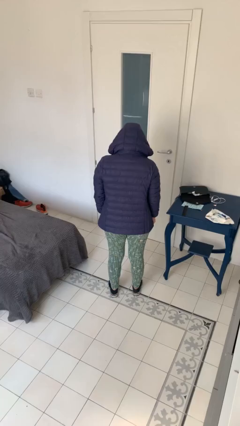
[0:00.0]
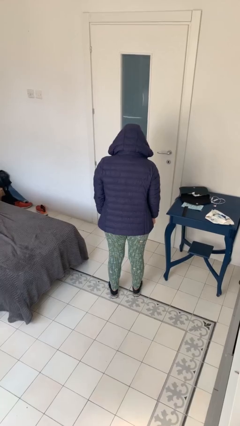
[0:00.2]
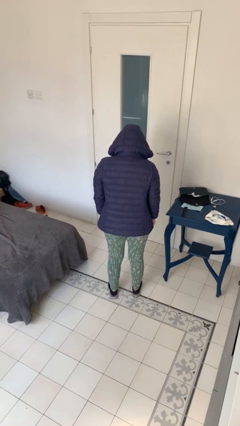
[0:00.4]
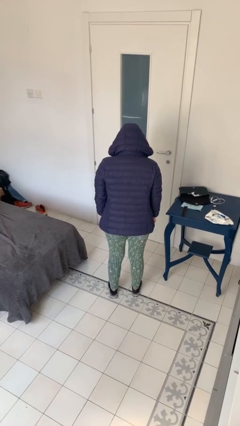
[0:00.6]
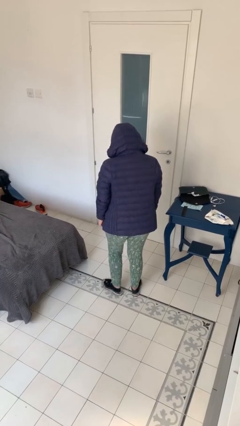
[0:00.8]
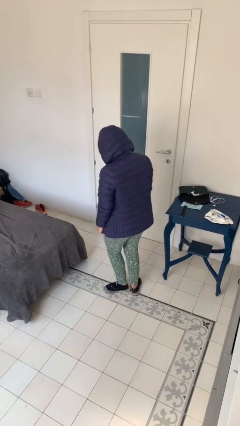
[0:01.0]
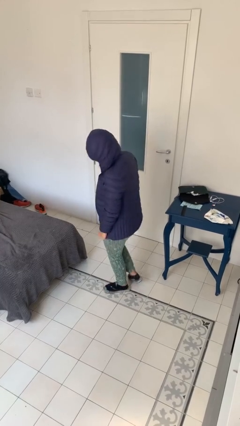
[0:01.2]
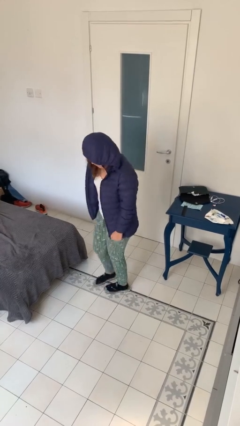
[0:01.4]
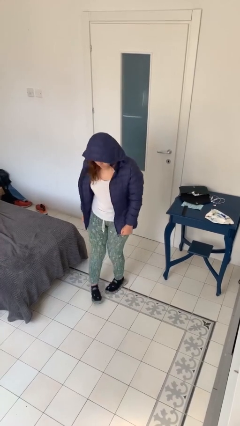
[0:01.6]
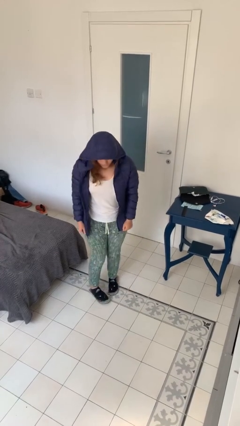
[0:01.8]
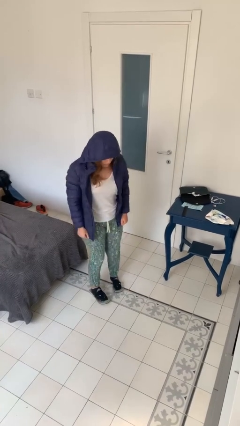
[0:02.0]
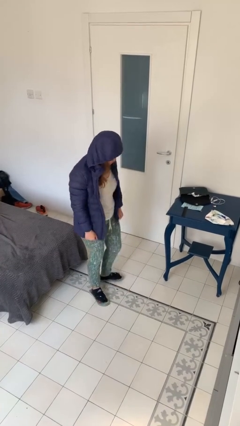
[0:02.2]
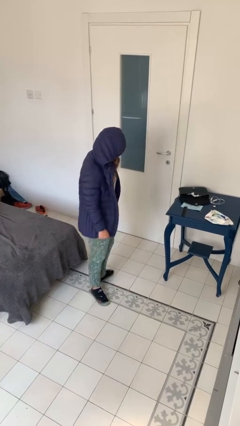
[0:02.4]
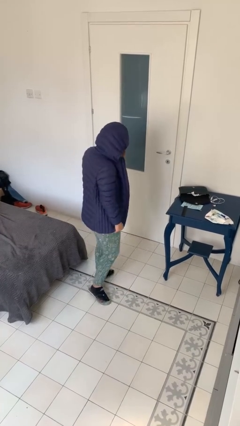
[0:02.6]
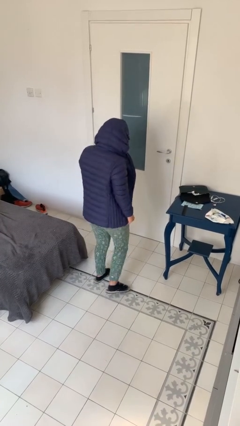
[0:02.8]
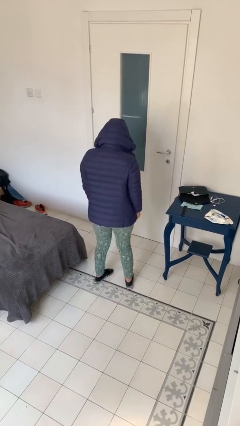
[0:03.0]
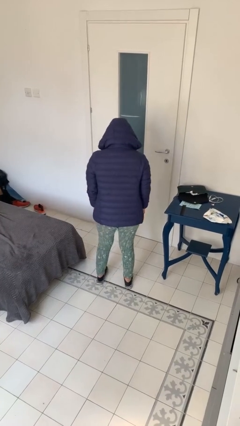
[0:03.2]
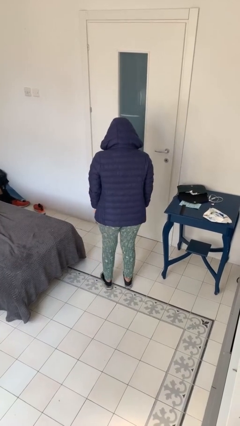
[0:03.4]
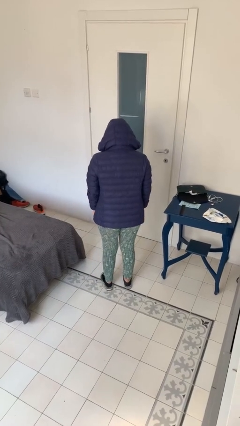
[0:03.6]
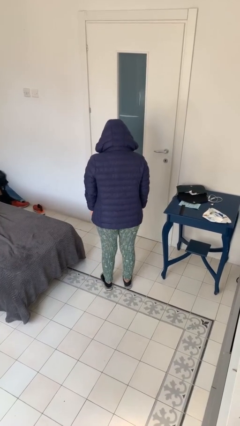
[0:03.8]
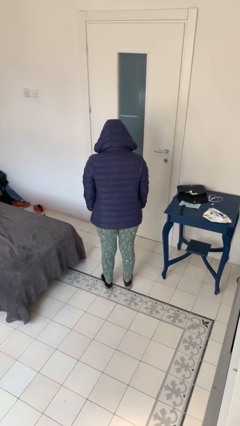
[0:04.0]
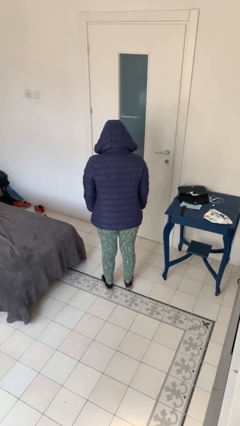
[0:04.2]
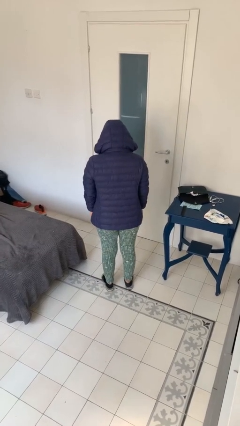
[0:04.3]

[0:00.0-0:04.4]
person twirls

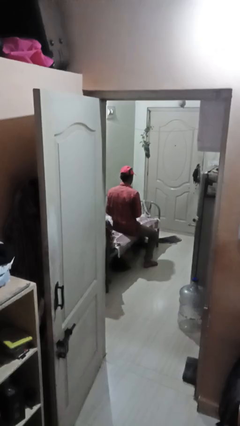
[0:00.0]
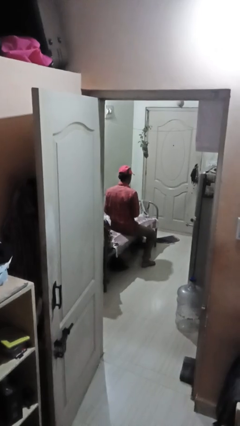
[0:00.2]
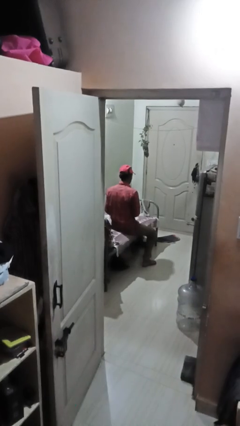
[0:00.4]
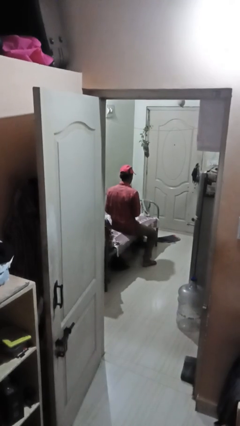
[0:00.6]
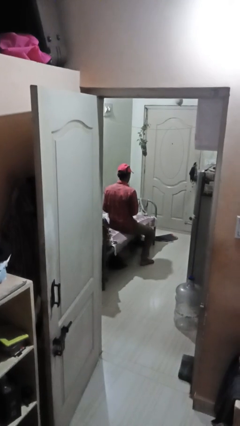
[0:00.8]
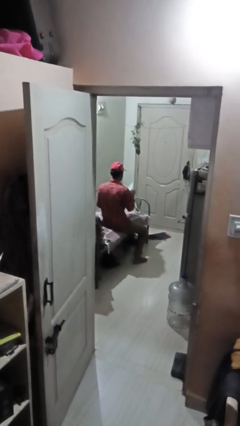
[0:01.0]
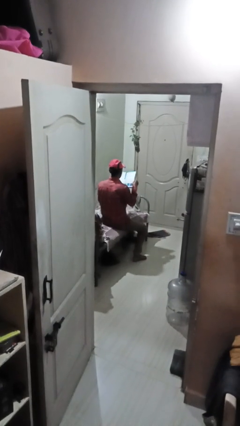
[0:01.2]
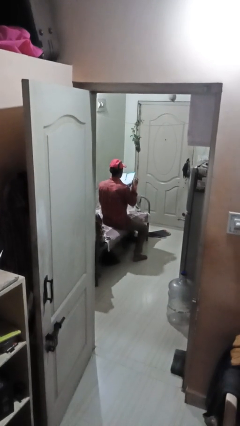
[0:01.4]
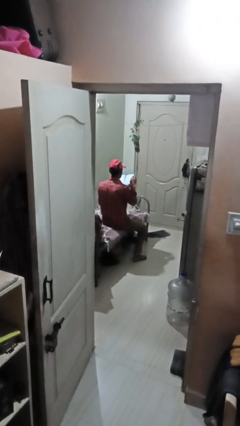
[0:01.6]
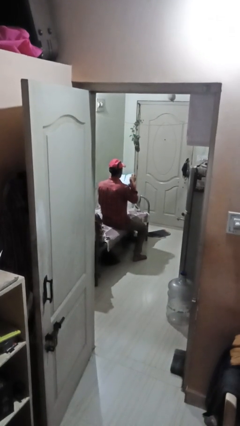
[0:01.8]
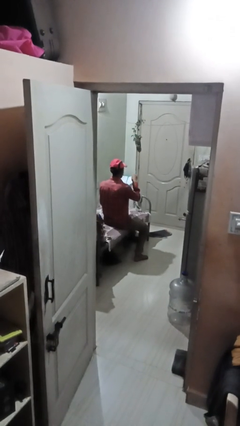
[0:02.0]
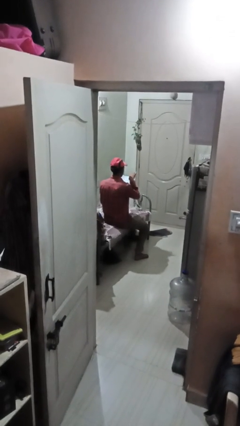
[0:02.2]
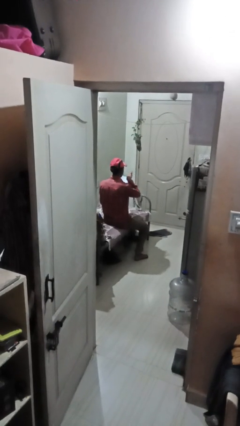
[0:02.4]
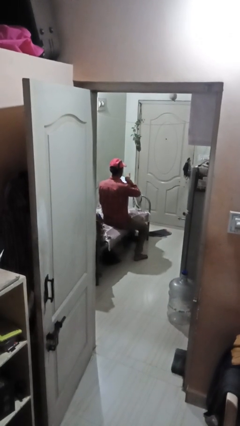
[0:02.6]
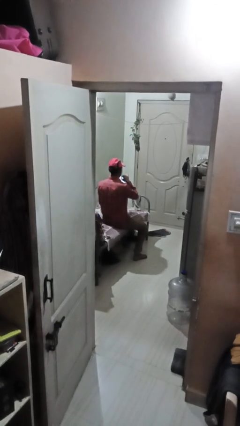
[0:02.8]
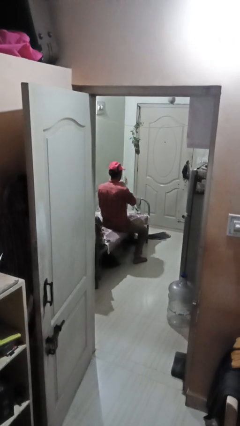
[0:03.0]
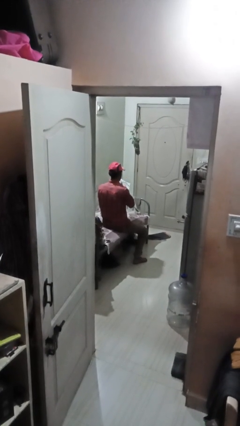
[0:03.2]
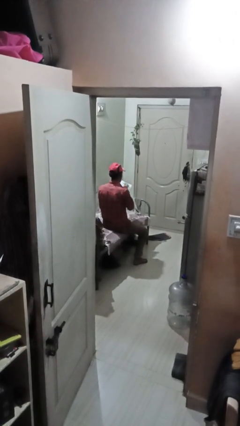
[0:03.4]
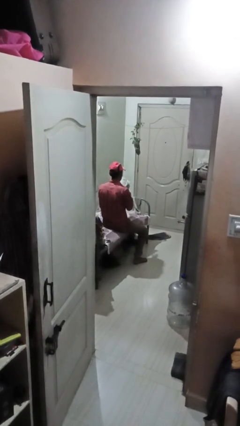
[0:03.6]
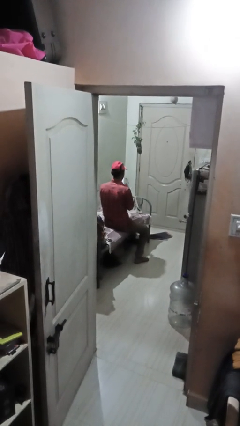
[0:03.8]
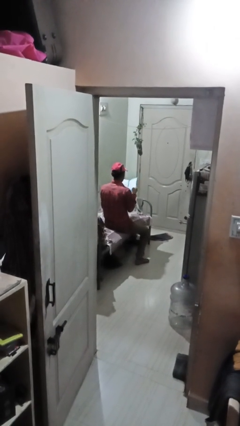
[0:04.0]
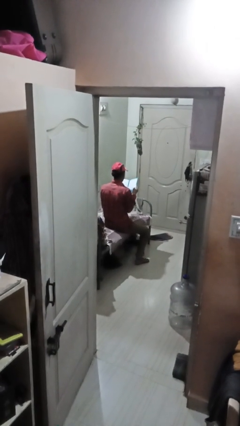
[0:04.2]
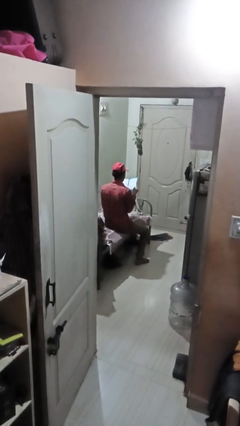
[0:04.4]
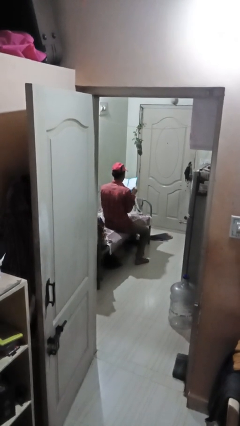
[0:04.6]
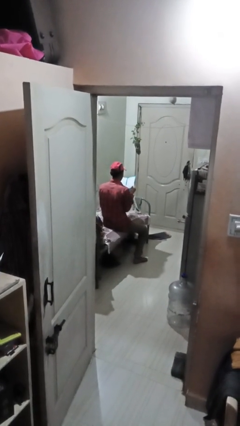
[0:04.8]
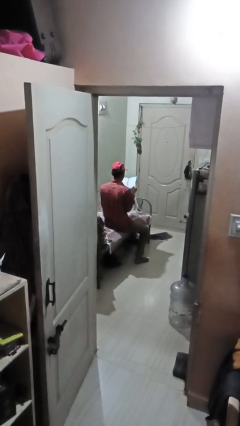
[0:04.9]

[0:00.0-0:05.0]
person reads magazine

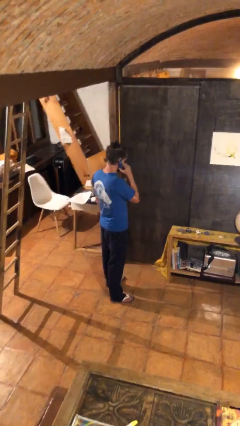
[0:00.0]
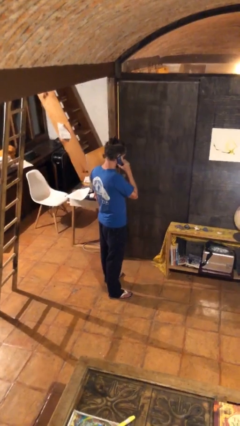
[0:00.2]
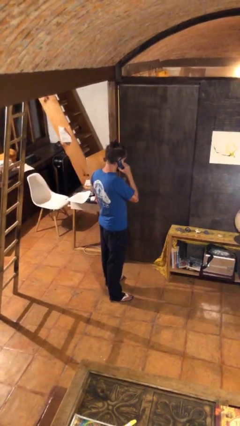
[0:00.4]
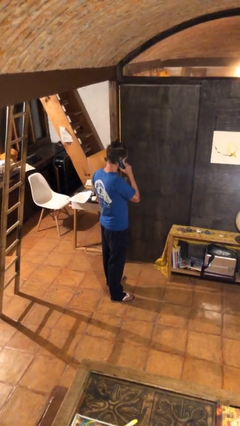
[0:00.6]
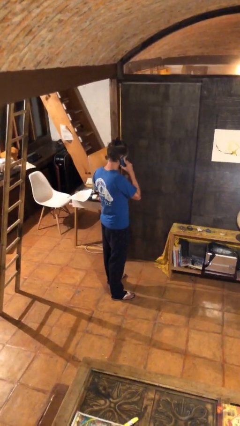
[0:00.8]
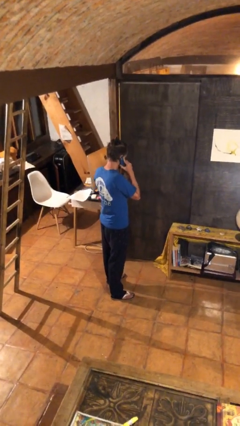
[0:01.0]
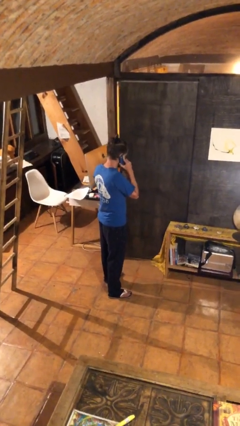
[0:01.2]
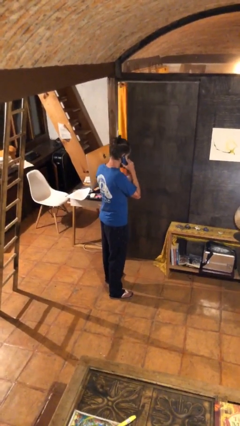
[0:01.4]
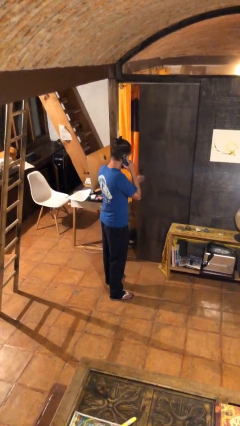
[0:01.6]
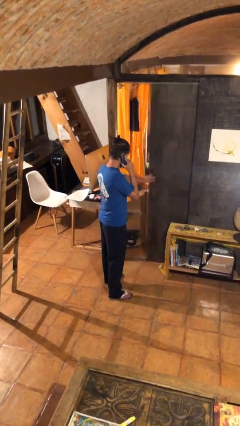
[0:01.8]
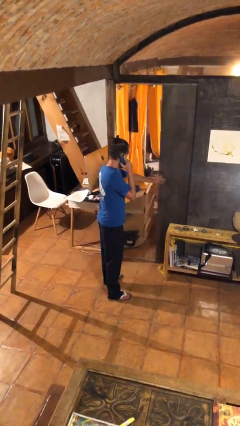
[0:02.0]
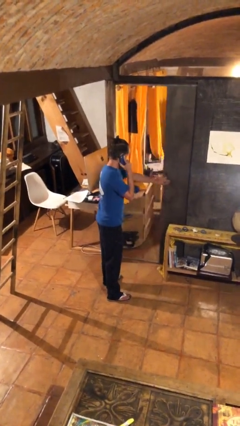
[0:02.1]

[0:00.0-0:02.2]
person opens facility door

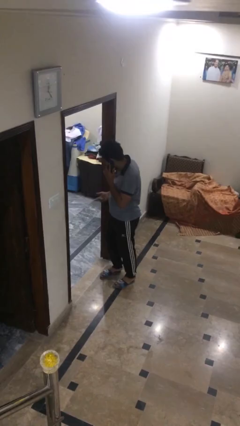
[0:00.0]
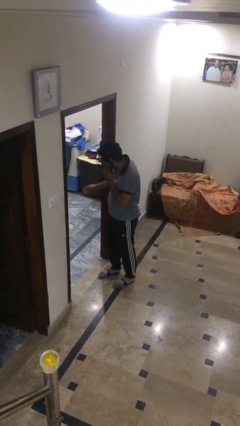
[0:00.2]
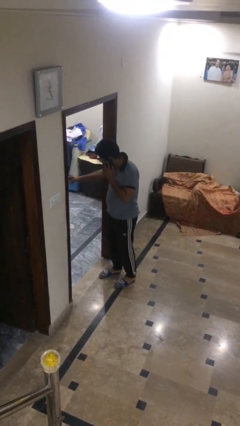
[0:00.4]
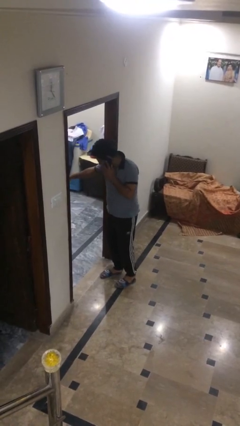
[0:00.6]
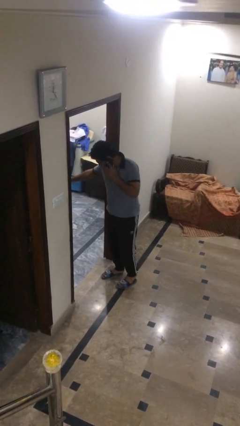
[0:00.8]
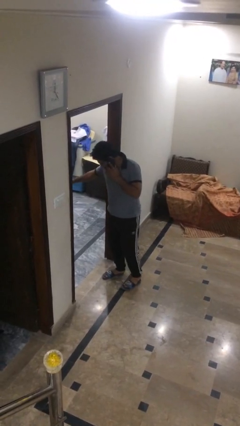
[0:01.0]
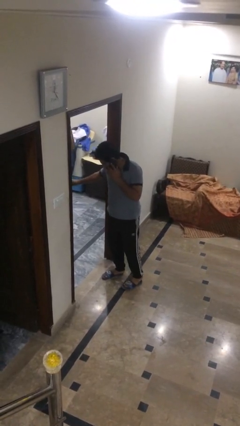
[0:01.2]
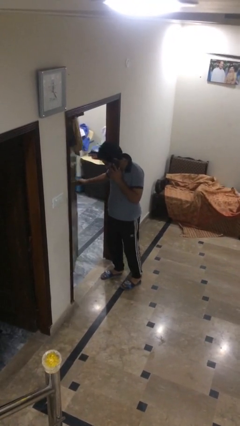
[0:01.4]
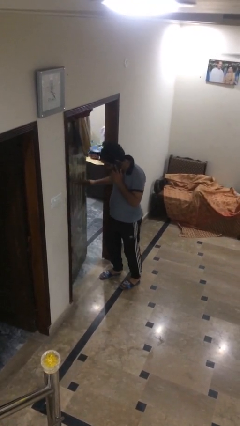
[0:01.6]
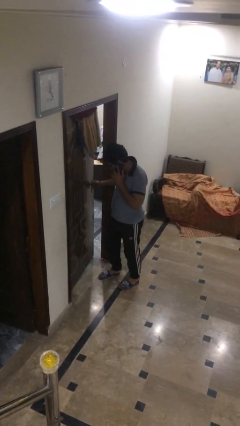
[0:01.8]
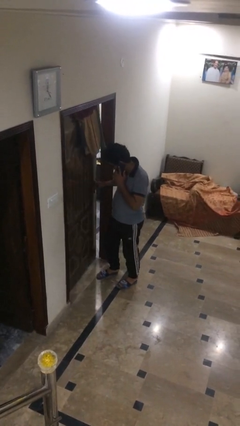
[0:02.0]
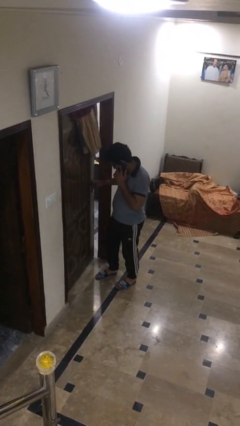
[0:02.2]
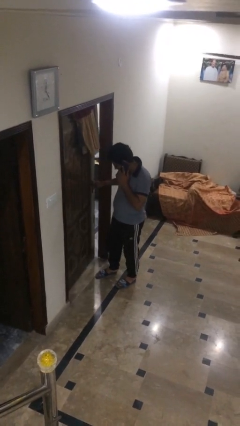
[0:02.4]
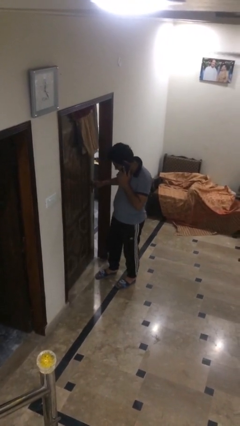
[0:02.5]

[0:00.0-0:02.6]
person closes facility door

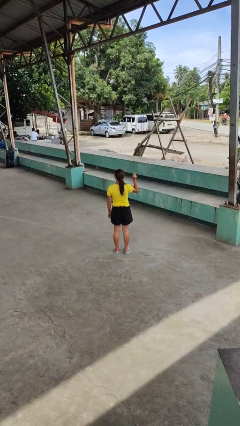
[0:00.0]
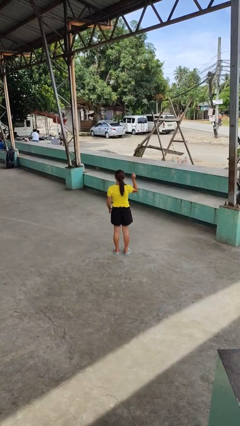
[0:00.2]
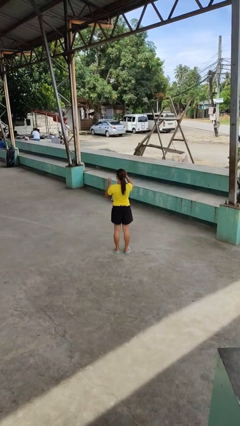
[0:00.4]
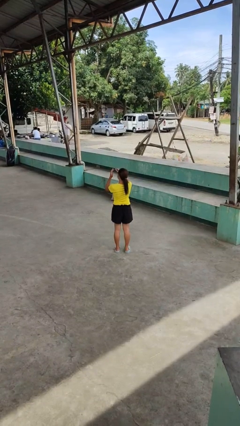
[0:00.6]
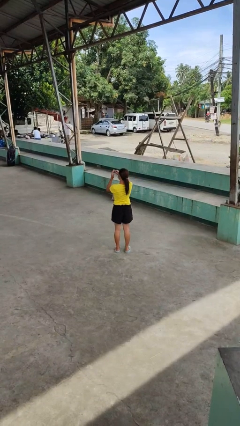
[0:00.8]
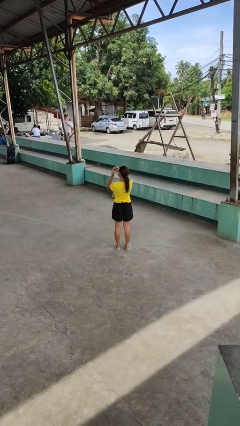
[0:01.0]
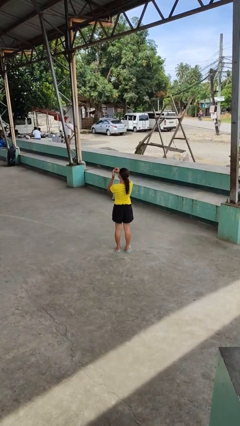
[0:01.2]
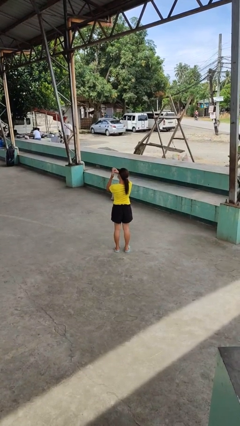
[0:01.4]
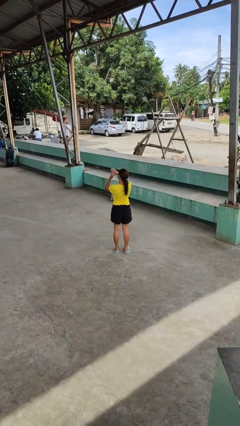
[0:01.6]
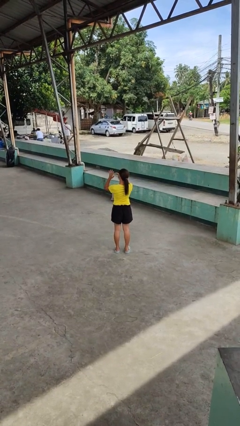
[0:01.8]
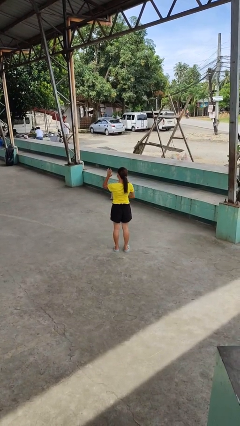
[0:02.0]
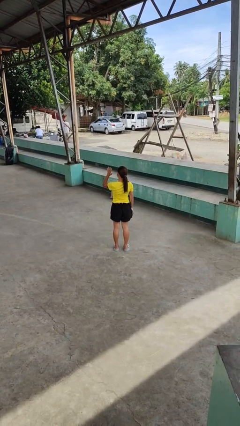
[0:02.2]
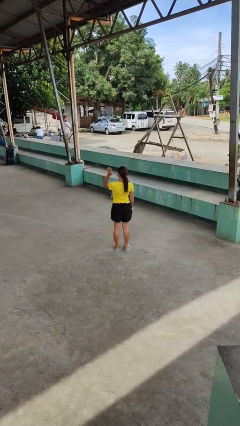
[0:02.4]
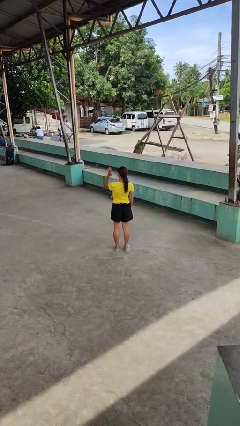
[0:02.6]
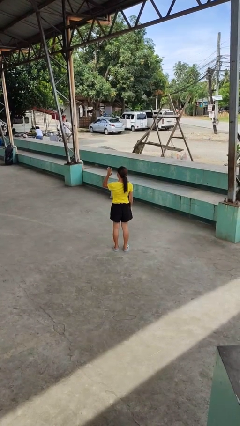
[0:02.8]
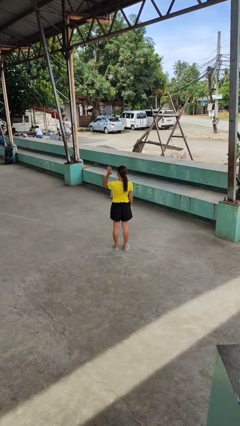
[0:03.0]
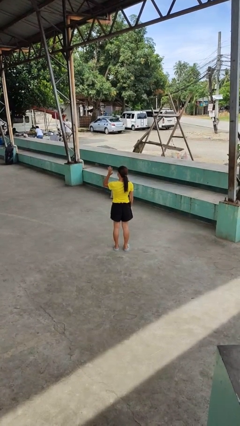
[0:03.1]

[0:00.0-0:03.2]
person puts on ring

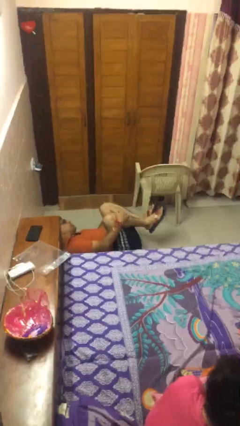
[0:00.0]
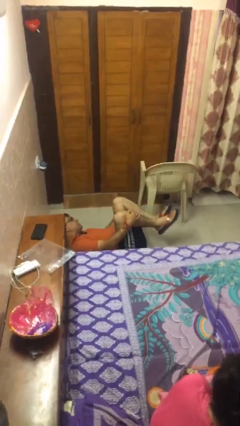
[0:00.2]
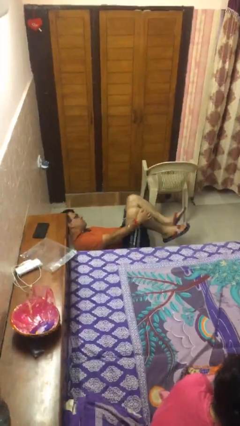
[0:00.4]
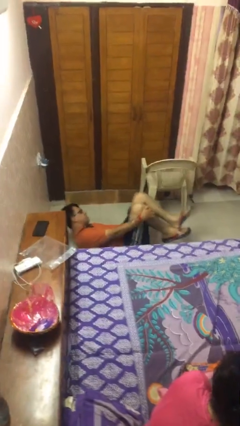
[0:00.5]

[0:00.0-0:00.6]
person lies down on floor
